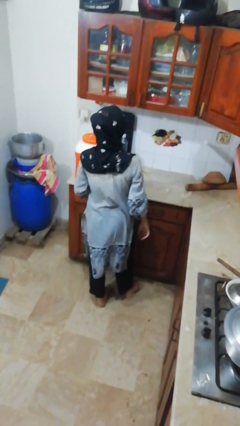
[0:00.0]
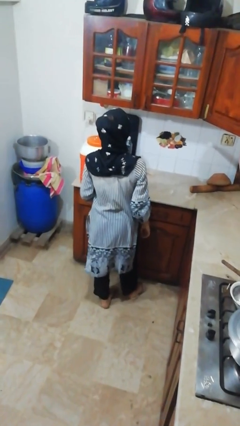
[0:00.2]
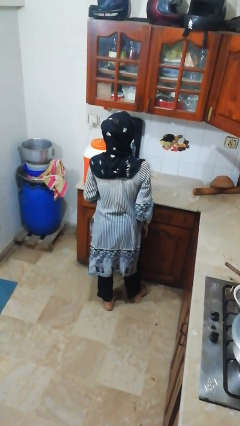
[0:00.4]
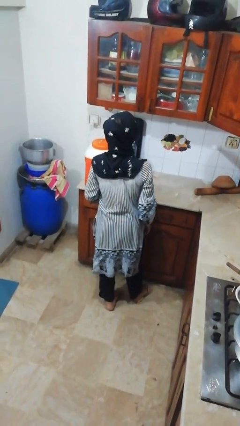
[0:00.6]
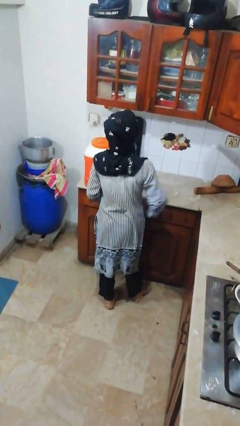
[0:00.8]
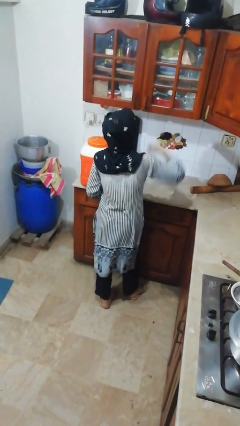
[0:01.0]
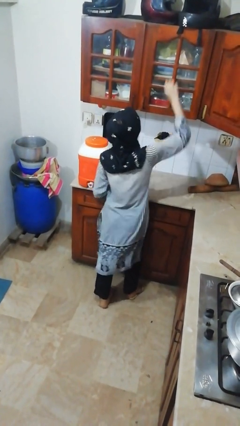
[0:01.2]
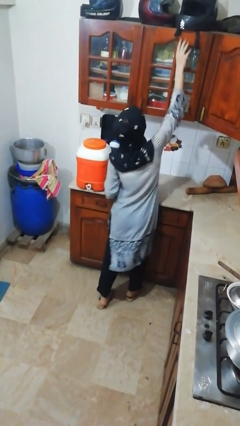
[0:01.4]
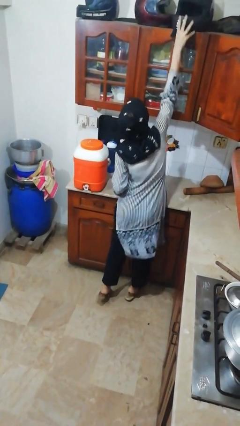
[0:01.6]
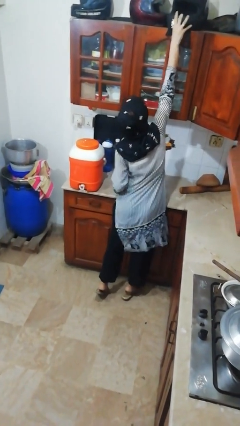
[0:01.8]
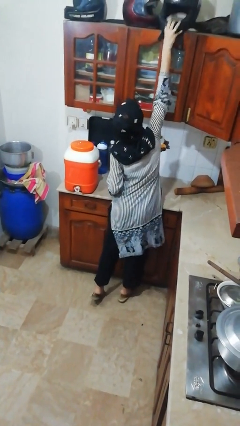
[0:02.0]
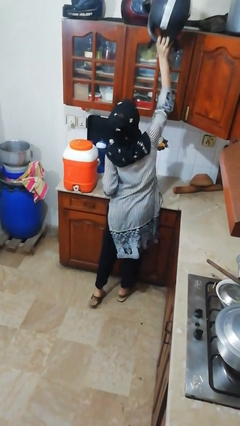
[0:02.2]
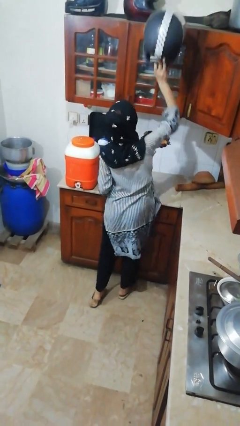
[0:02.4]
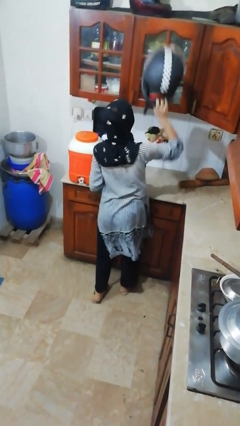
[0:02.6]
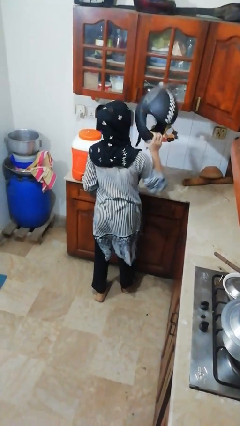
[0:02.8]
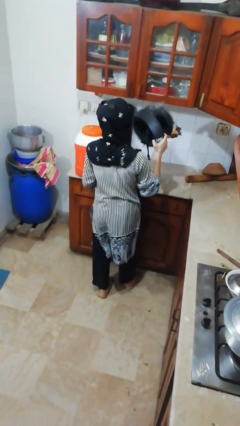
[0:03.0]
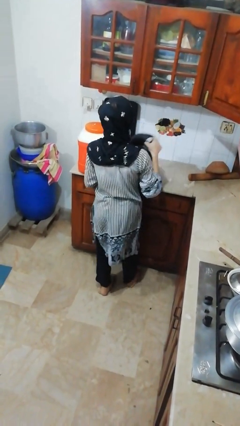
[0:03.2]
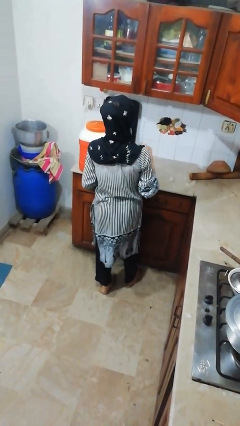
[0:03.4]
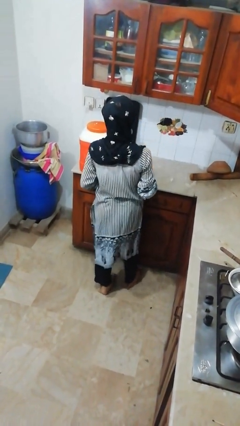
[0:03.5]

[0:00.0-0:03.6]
person picks up object from shelf

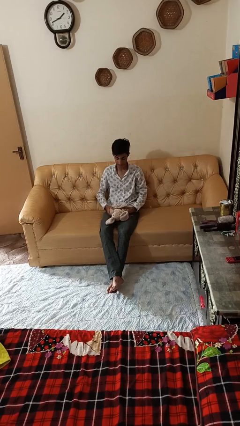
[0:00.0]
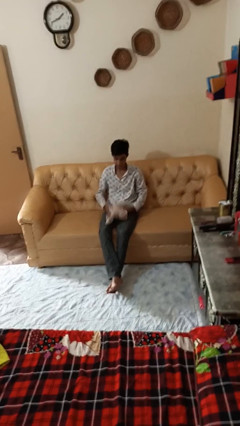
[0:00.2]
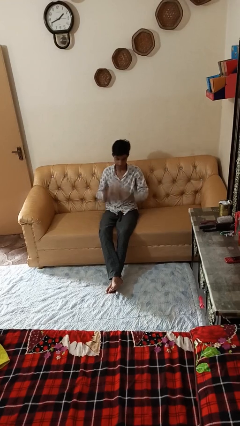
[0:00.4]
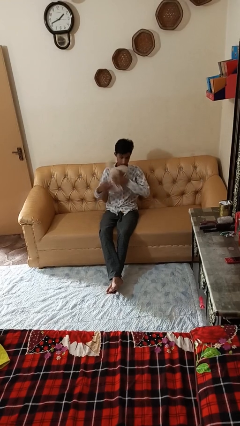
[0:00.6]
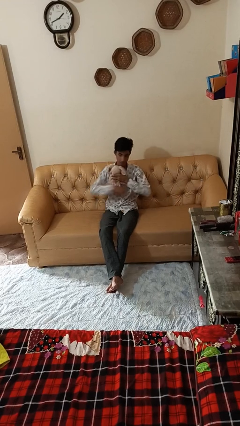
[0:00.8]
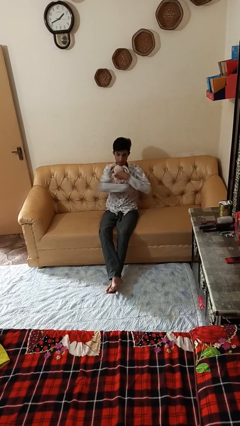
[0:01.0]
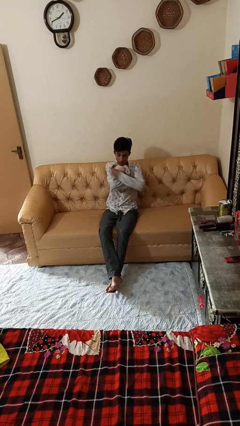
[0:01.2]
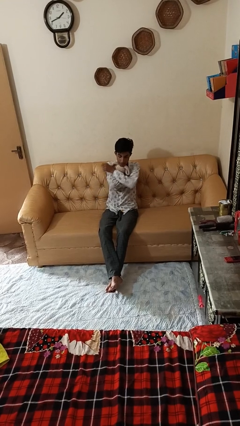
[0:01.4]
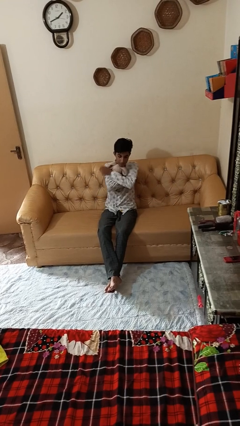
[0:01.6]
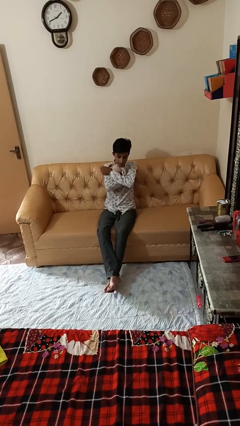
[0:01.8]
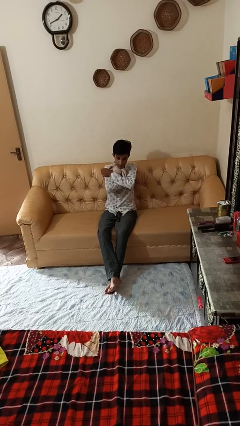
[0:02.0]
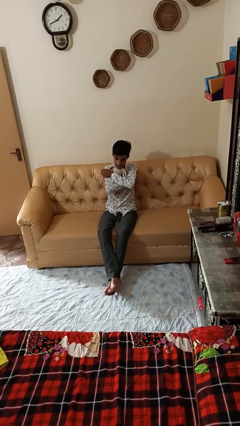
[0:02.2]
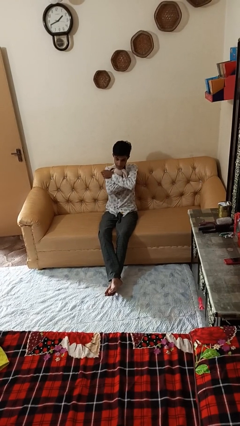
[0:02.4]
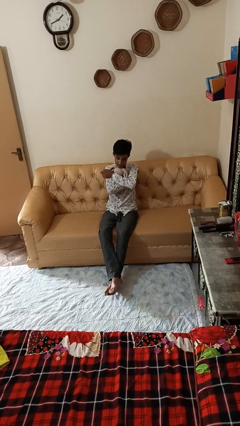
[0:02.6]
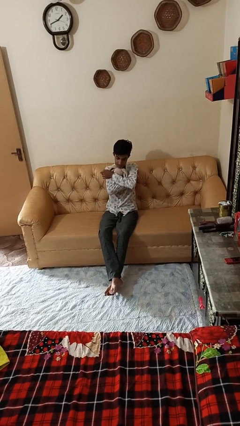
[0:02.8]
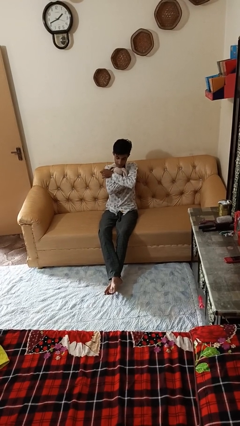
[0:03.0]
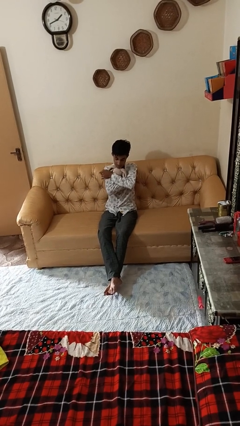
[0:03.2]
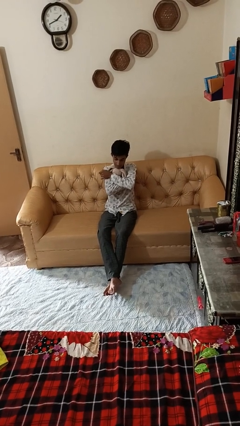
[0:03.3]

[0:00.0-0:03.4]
person hugs stuffed animal

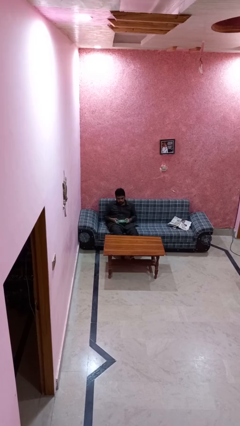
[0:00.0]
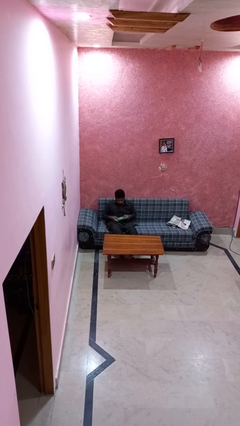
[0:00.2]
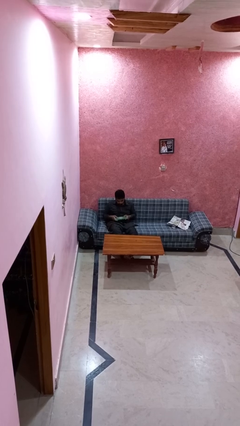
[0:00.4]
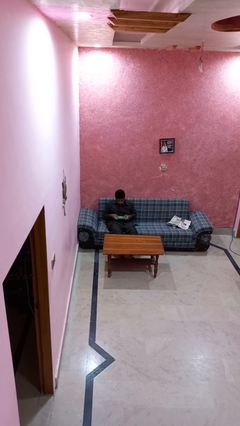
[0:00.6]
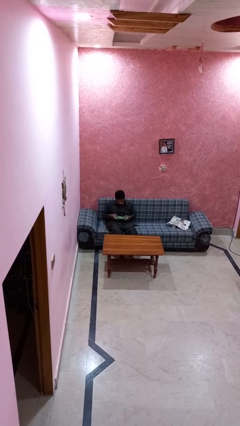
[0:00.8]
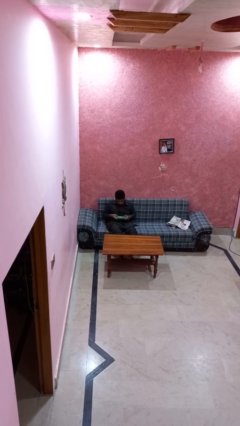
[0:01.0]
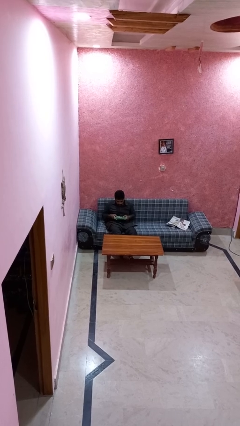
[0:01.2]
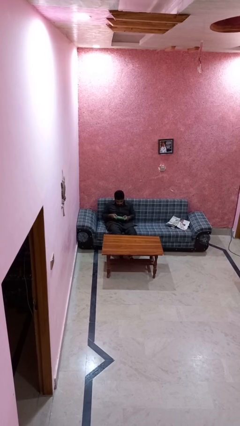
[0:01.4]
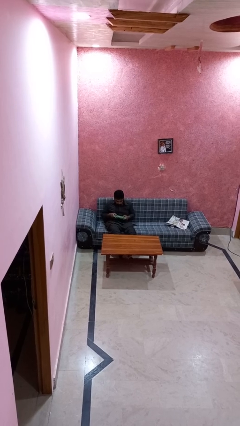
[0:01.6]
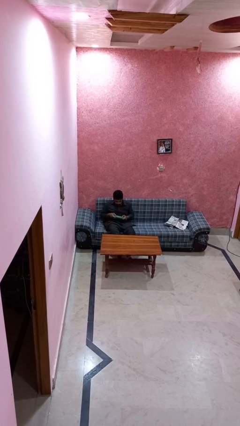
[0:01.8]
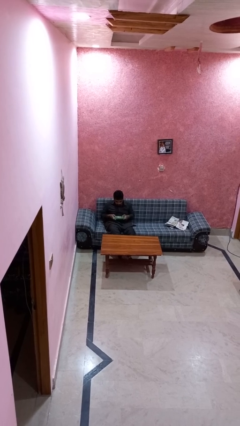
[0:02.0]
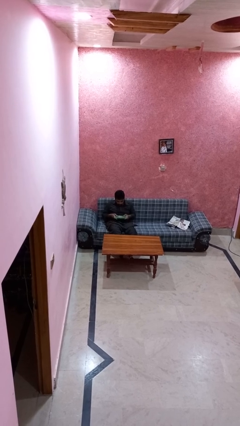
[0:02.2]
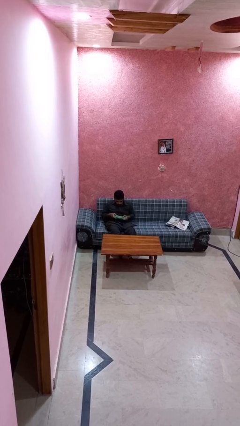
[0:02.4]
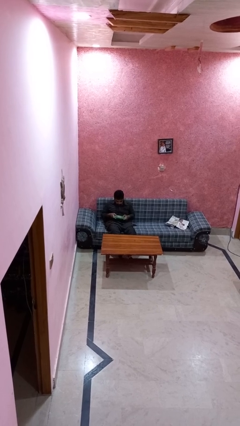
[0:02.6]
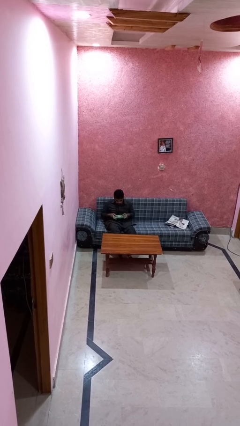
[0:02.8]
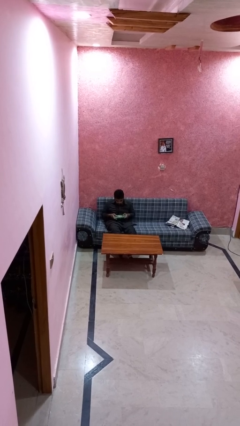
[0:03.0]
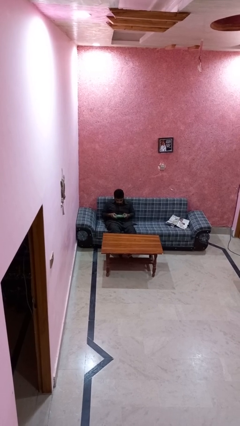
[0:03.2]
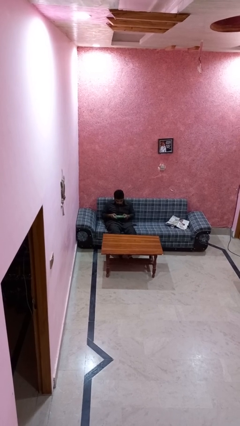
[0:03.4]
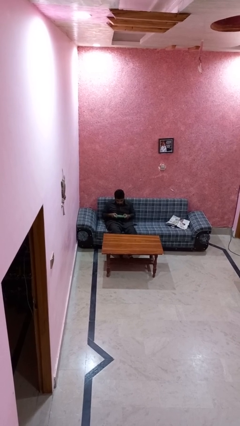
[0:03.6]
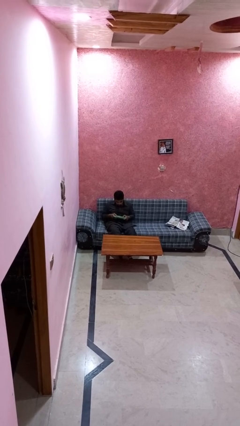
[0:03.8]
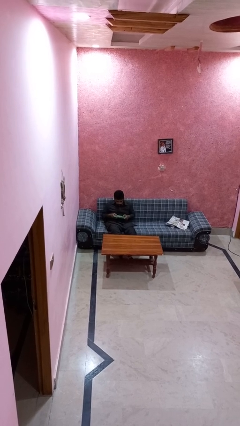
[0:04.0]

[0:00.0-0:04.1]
person interacts with handheld game

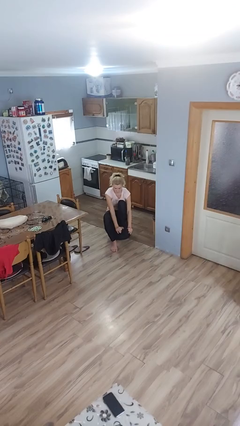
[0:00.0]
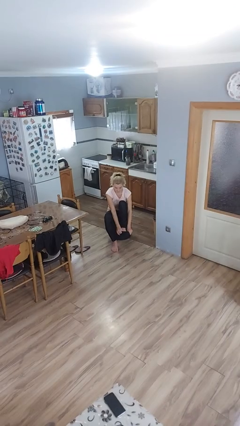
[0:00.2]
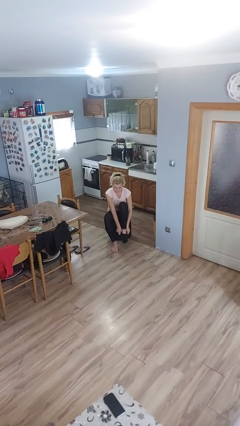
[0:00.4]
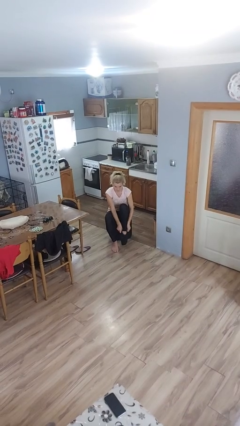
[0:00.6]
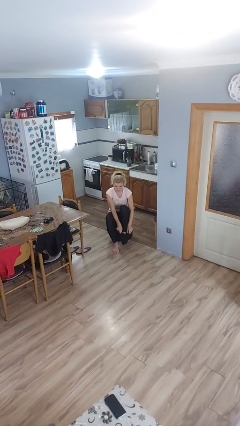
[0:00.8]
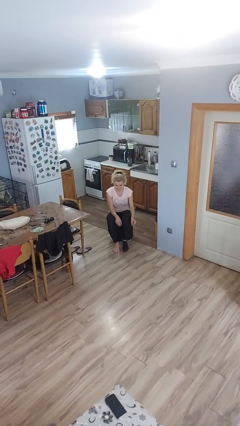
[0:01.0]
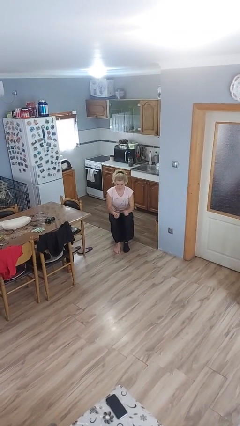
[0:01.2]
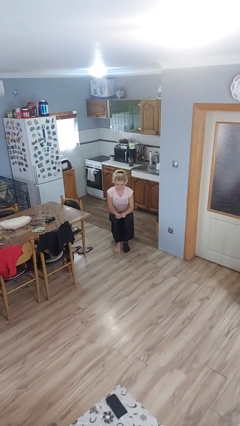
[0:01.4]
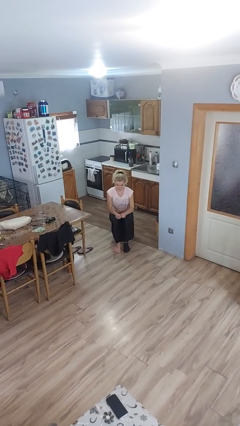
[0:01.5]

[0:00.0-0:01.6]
person puts on socks

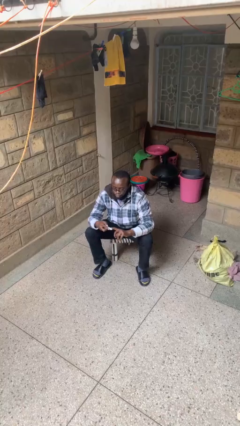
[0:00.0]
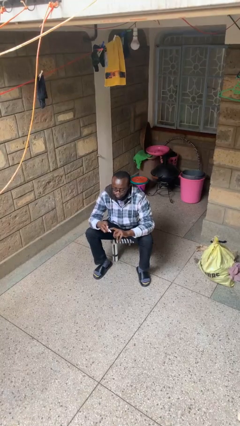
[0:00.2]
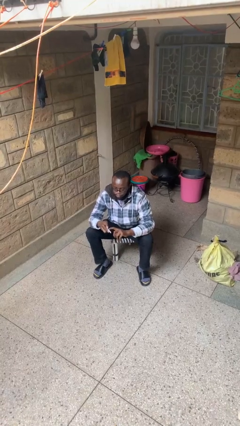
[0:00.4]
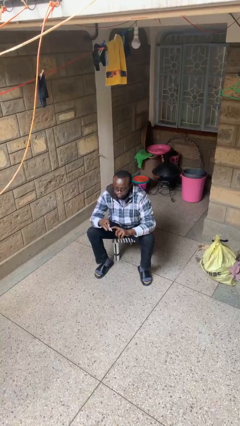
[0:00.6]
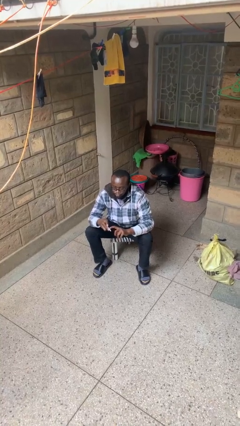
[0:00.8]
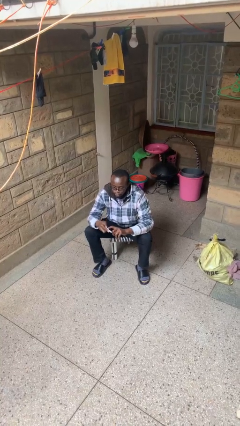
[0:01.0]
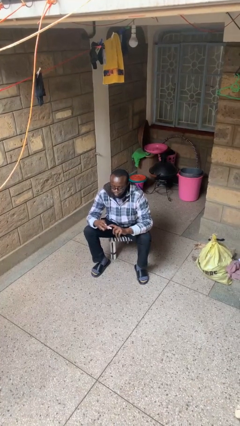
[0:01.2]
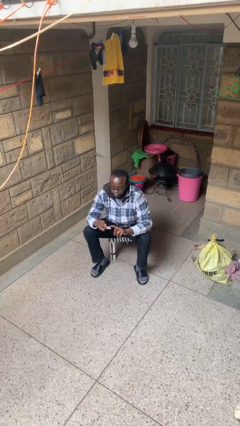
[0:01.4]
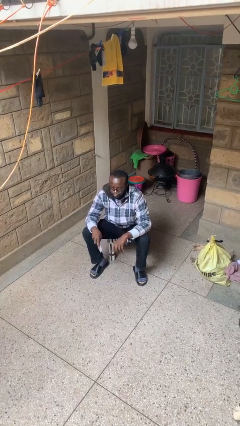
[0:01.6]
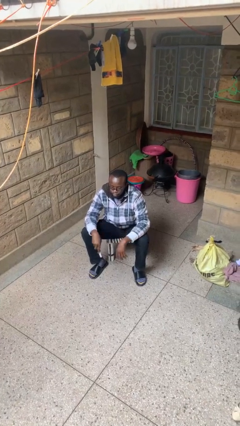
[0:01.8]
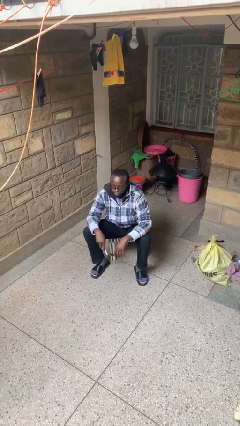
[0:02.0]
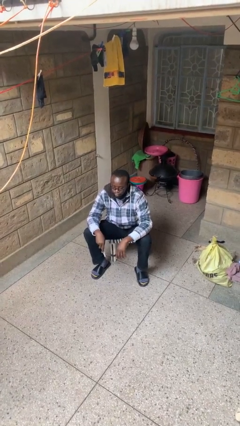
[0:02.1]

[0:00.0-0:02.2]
person files fingernails

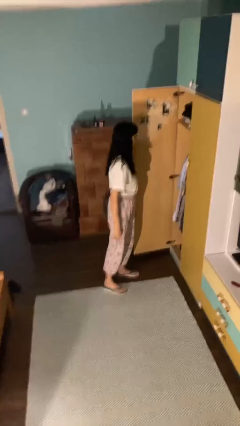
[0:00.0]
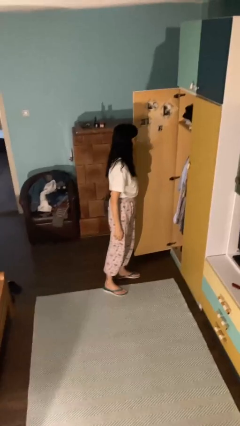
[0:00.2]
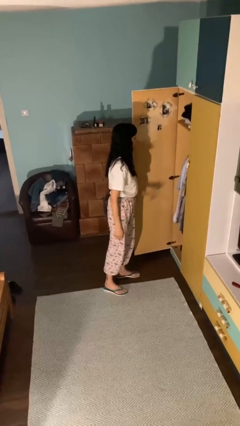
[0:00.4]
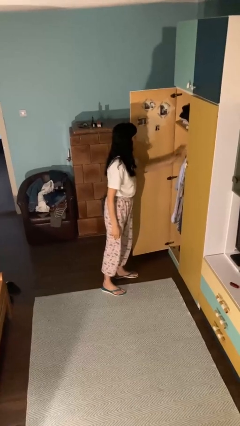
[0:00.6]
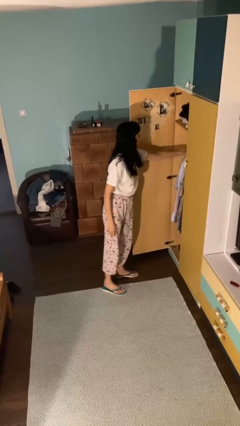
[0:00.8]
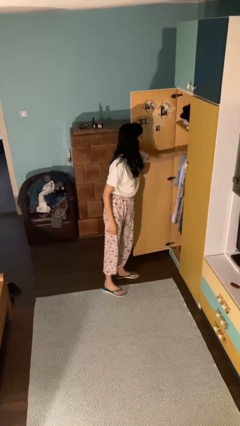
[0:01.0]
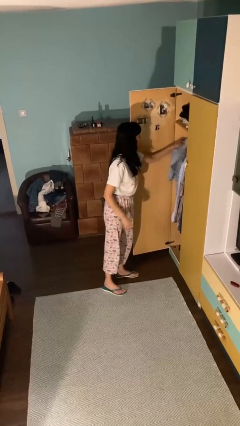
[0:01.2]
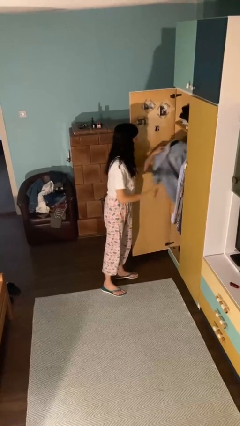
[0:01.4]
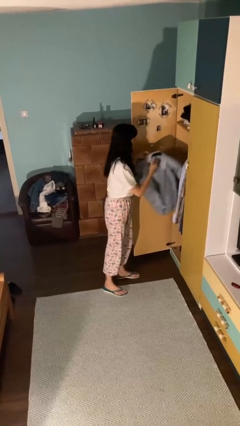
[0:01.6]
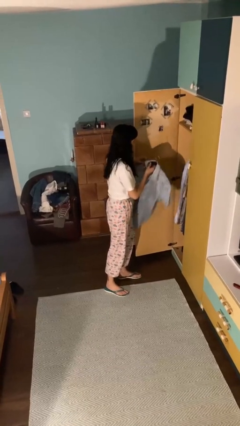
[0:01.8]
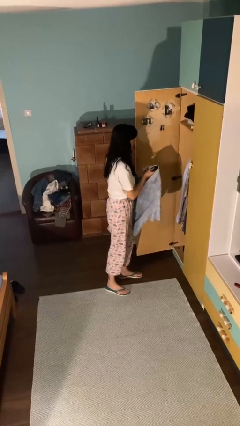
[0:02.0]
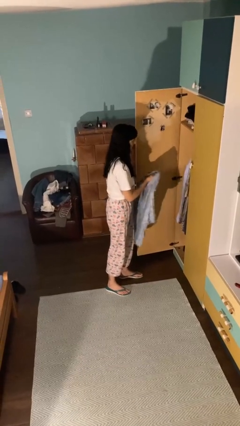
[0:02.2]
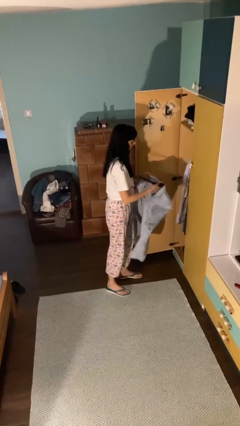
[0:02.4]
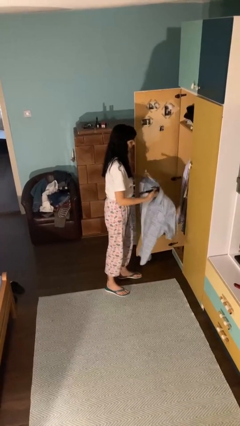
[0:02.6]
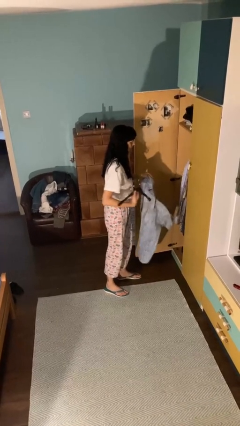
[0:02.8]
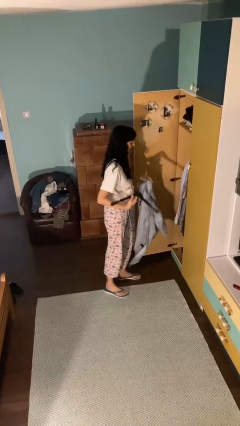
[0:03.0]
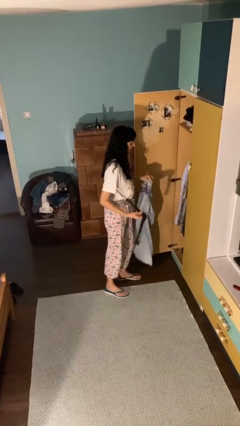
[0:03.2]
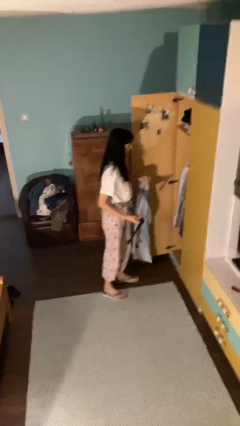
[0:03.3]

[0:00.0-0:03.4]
person takes clothes from closet
